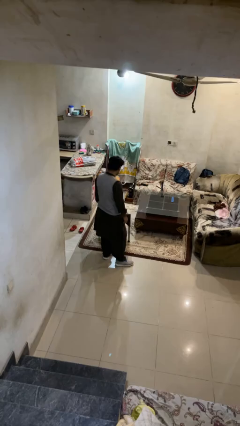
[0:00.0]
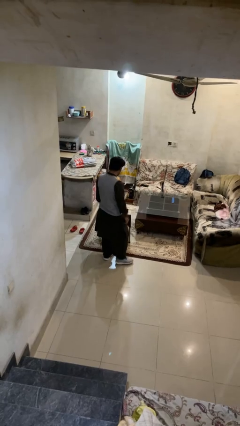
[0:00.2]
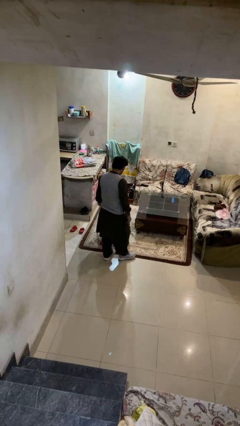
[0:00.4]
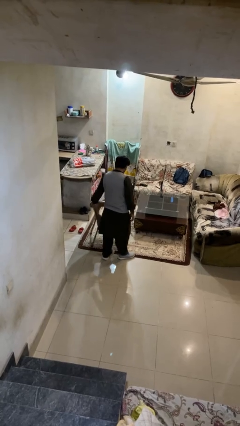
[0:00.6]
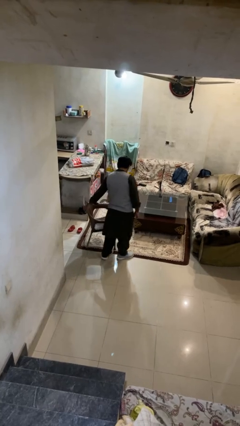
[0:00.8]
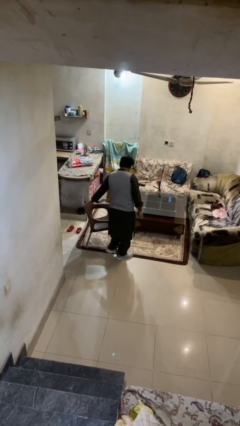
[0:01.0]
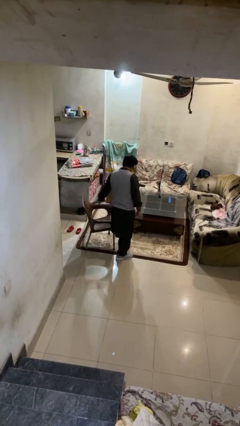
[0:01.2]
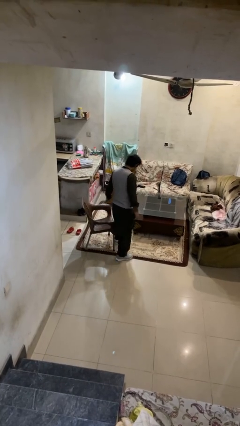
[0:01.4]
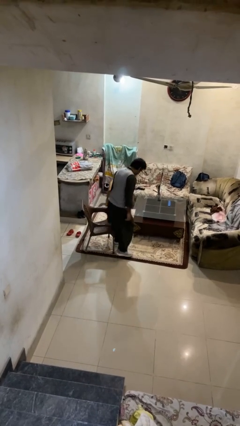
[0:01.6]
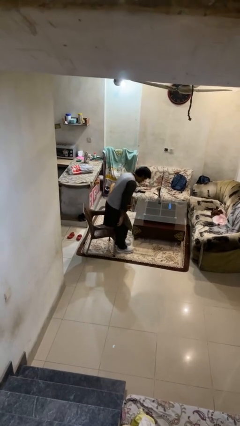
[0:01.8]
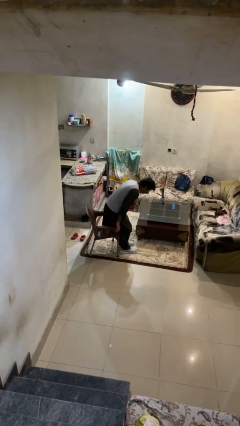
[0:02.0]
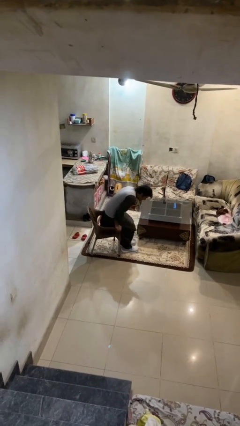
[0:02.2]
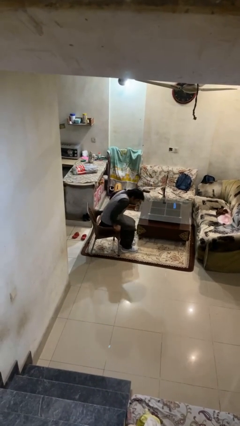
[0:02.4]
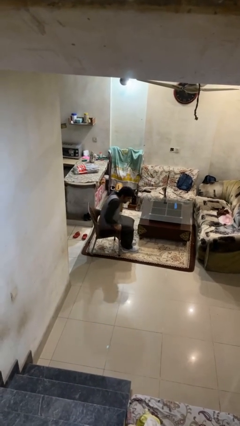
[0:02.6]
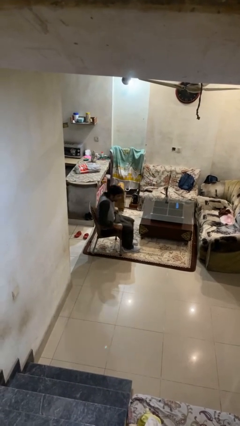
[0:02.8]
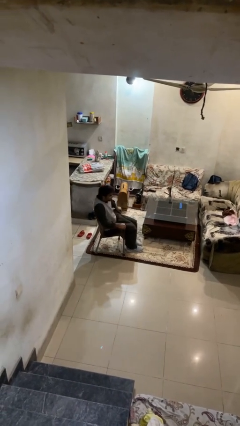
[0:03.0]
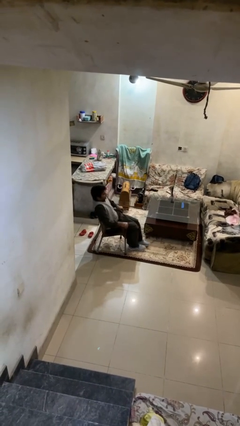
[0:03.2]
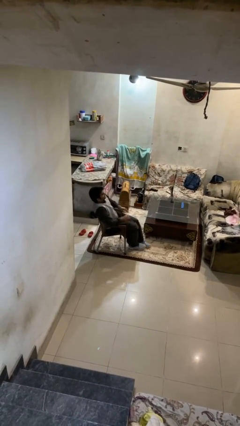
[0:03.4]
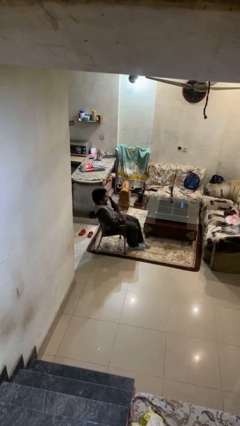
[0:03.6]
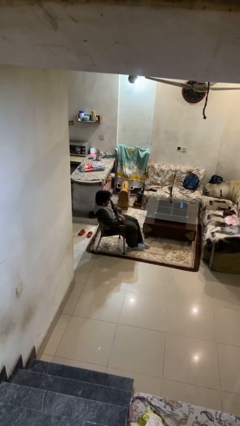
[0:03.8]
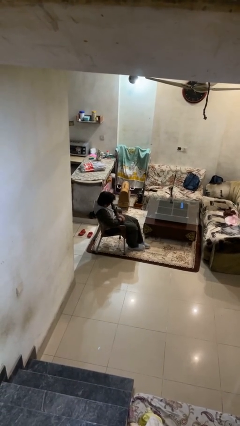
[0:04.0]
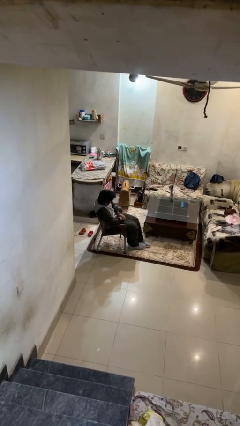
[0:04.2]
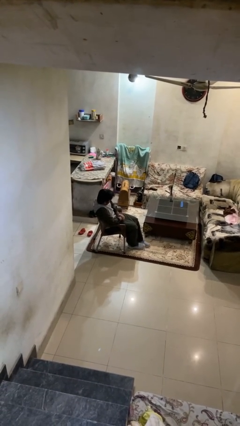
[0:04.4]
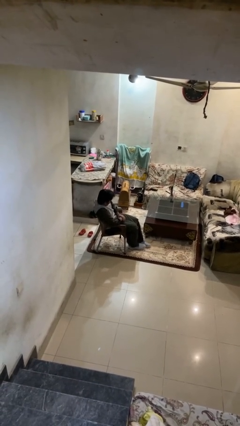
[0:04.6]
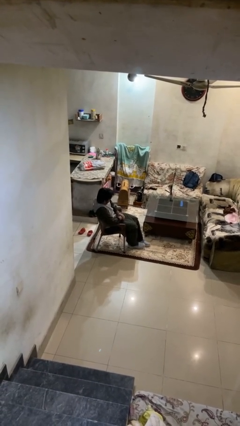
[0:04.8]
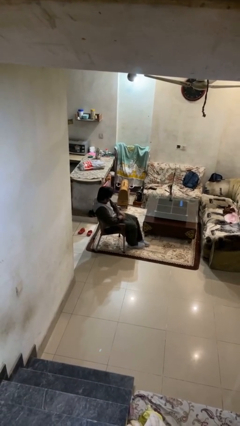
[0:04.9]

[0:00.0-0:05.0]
person sits down

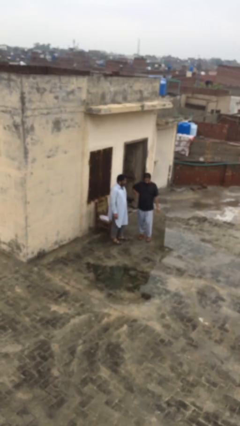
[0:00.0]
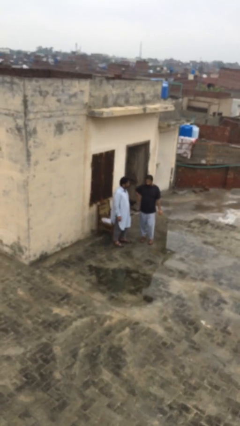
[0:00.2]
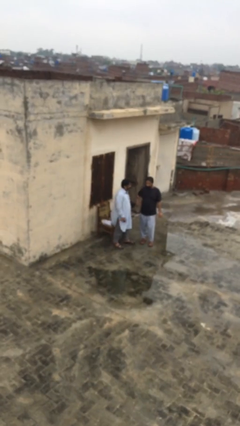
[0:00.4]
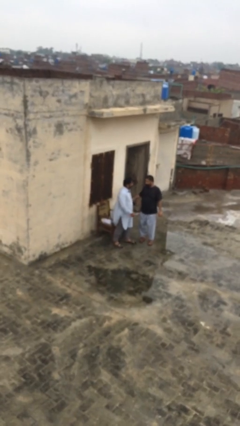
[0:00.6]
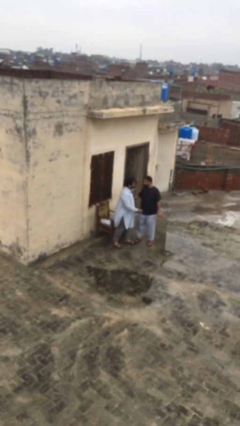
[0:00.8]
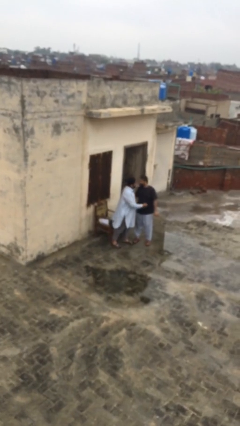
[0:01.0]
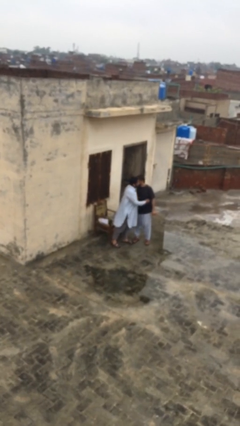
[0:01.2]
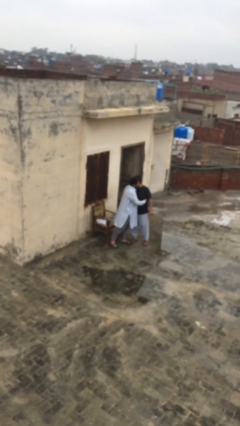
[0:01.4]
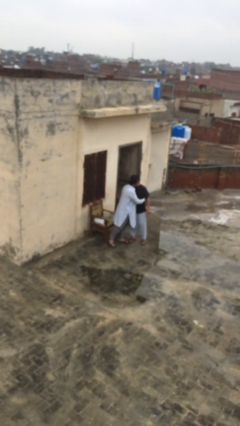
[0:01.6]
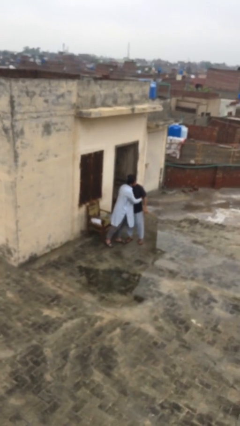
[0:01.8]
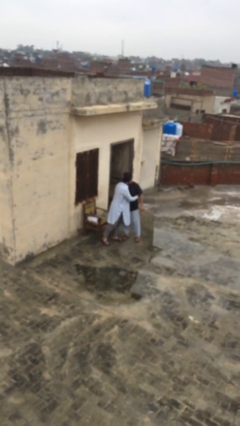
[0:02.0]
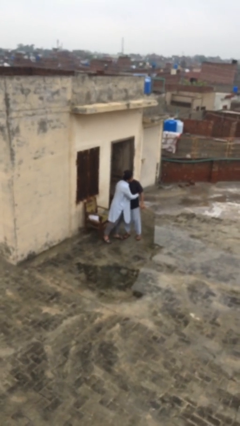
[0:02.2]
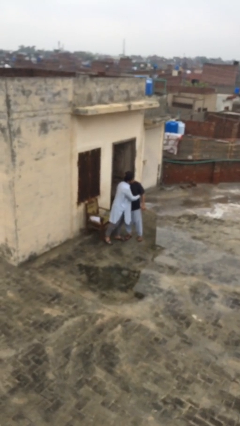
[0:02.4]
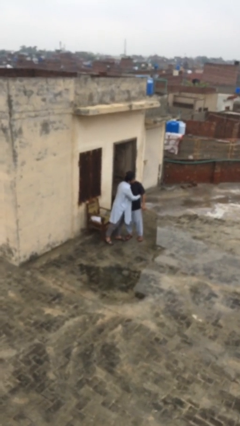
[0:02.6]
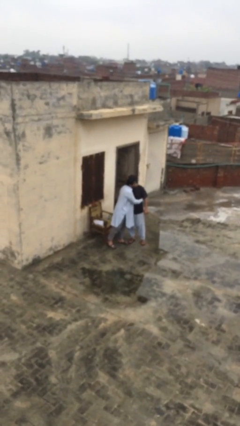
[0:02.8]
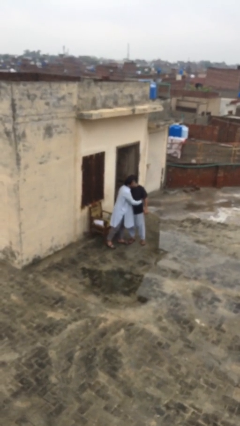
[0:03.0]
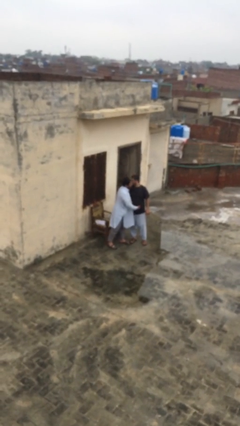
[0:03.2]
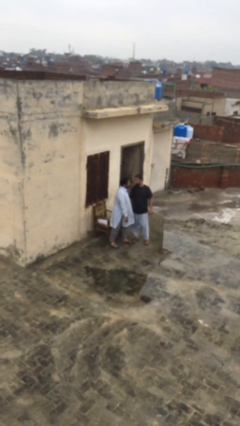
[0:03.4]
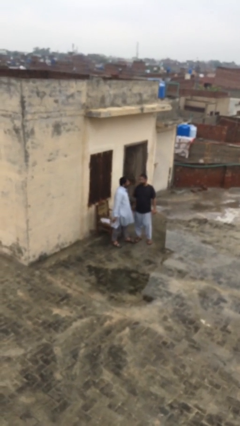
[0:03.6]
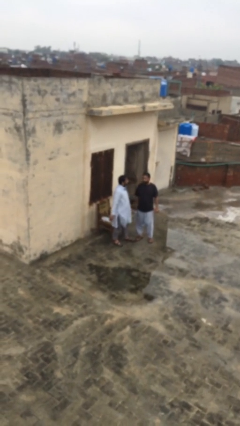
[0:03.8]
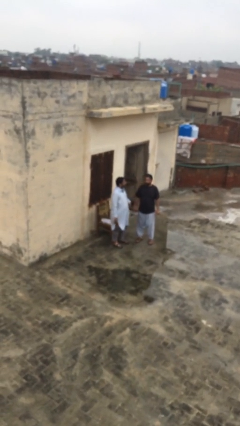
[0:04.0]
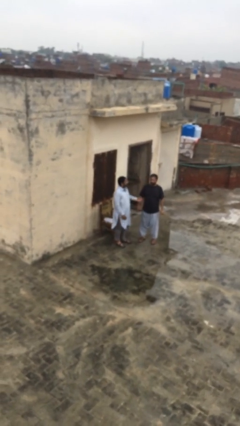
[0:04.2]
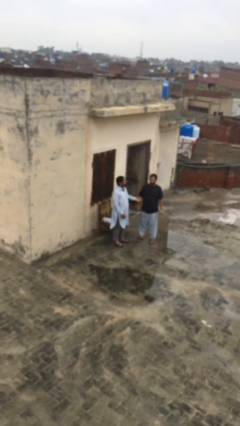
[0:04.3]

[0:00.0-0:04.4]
person embraces person

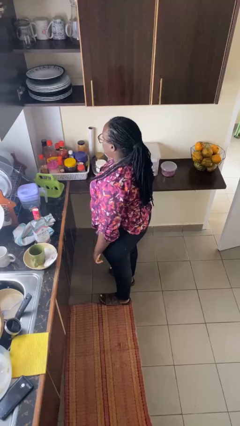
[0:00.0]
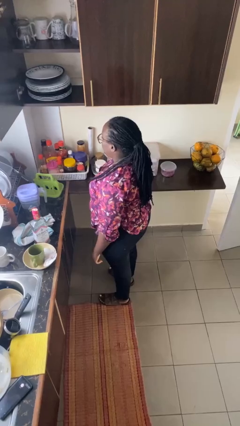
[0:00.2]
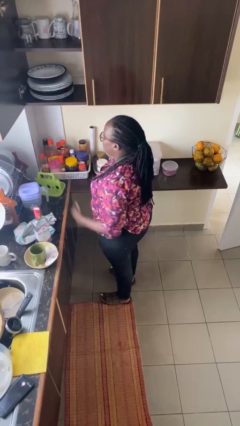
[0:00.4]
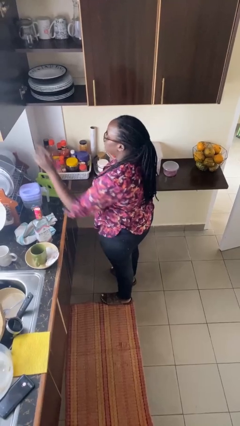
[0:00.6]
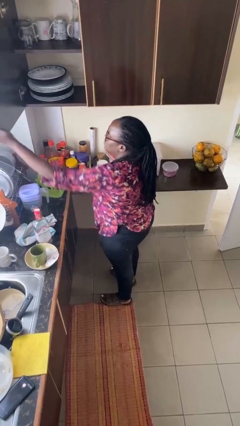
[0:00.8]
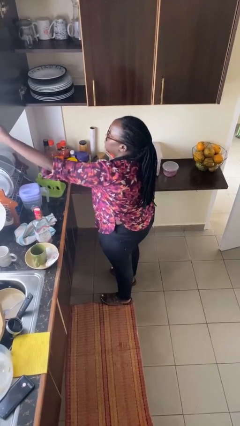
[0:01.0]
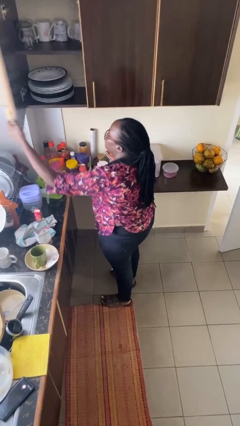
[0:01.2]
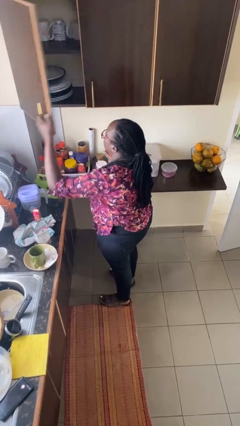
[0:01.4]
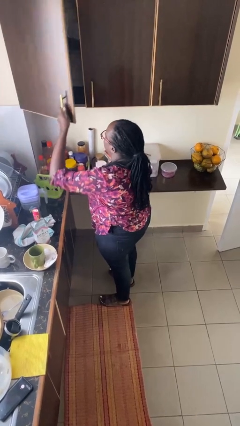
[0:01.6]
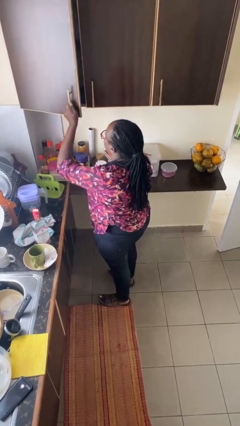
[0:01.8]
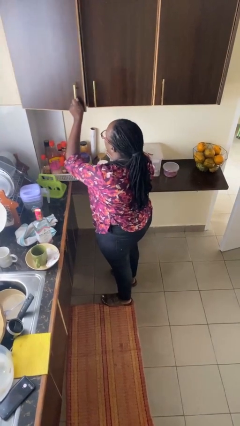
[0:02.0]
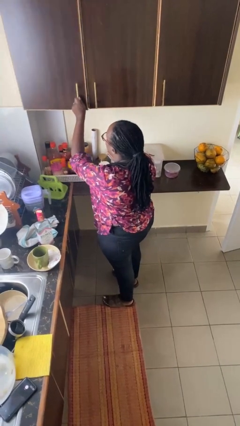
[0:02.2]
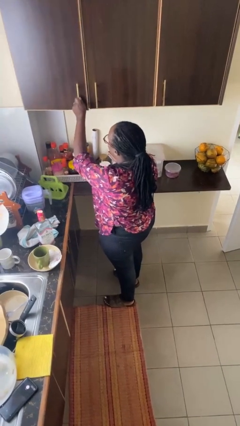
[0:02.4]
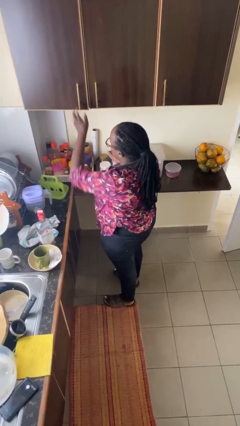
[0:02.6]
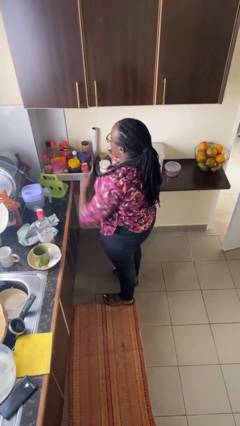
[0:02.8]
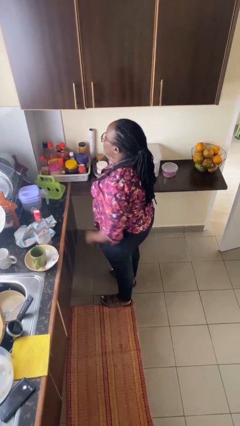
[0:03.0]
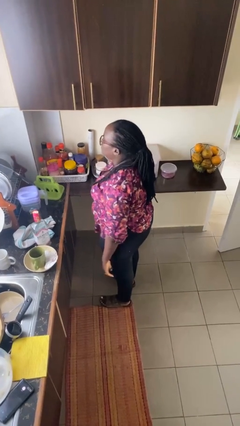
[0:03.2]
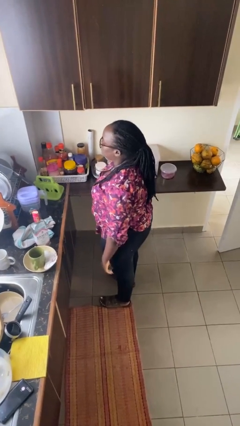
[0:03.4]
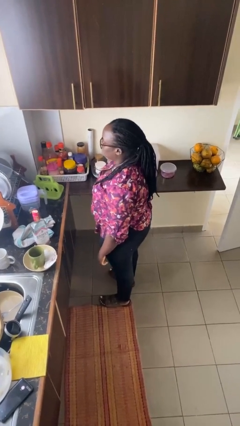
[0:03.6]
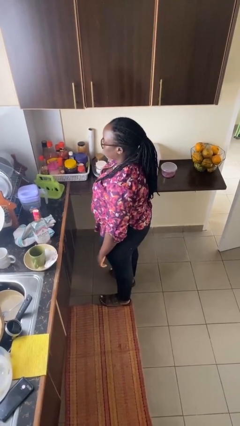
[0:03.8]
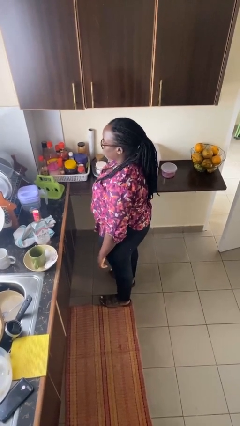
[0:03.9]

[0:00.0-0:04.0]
person closes cabinet

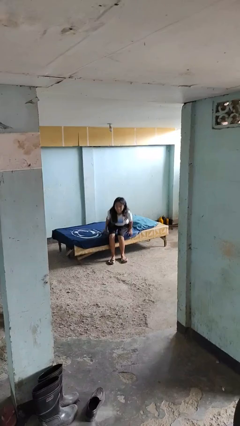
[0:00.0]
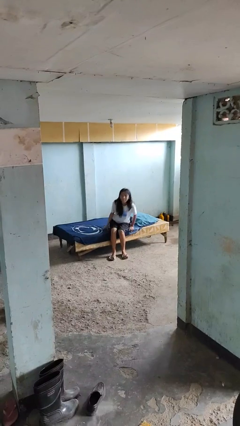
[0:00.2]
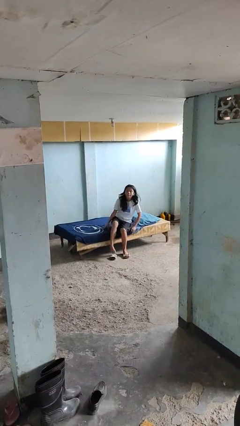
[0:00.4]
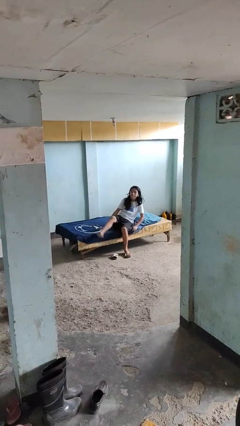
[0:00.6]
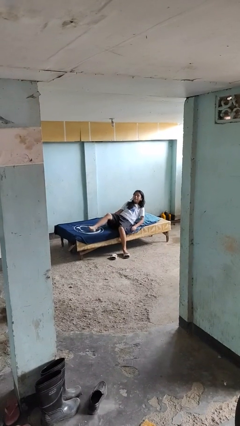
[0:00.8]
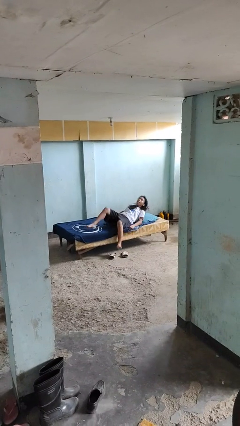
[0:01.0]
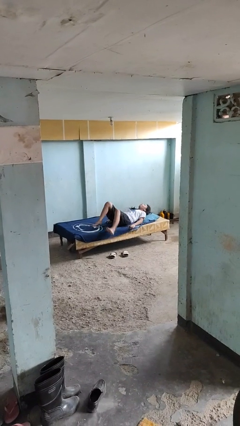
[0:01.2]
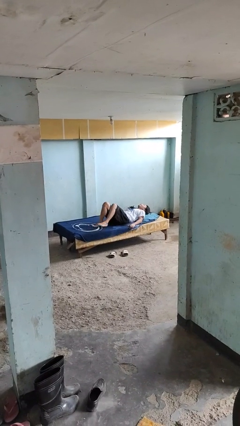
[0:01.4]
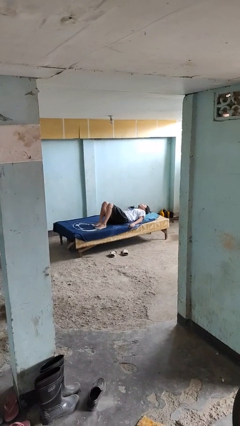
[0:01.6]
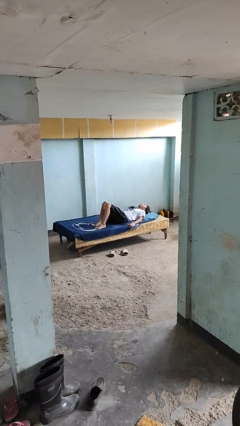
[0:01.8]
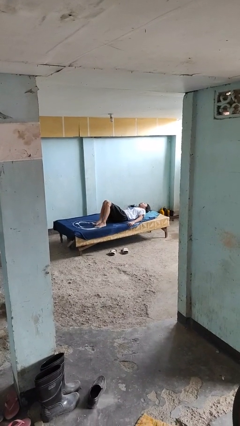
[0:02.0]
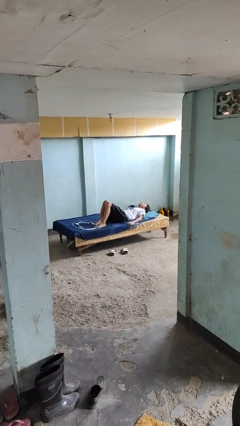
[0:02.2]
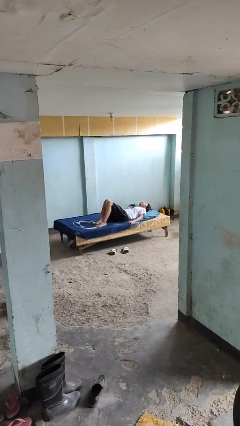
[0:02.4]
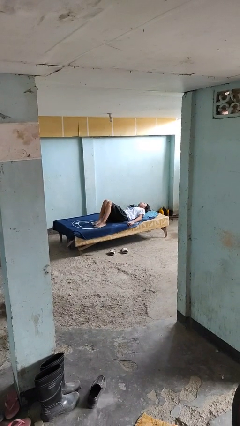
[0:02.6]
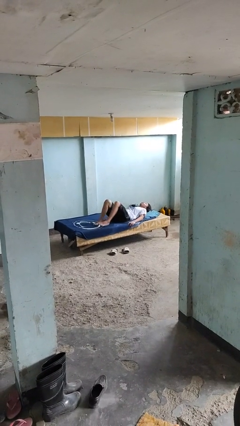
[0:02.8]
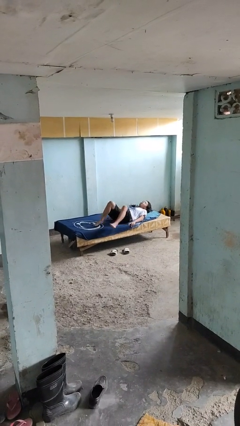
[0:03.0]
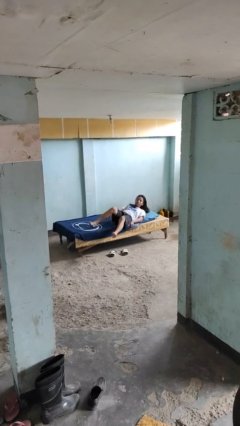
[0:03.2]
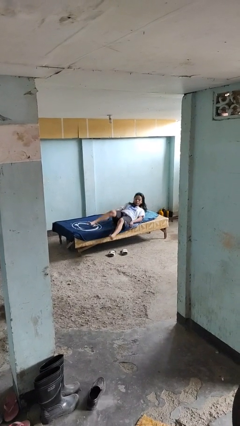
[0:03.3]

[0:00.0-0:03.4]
person lies down on bed

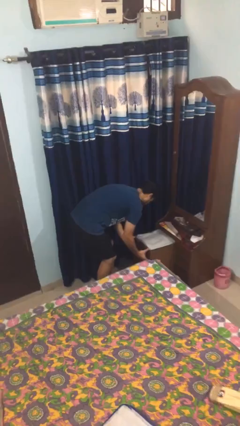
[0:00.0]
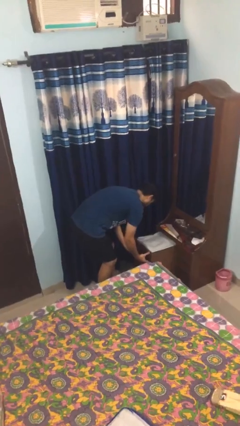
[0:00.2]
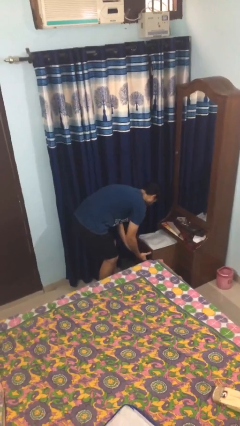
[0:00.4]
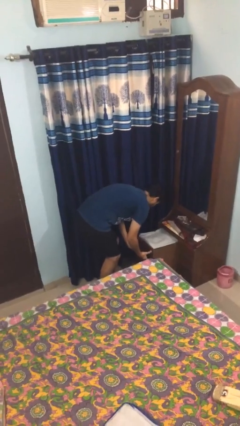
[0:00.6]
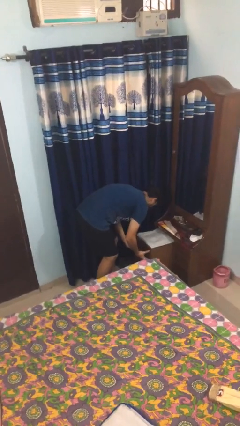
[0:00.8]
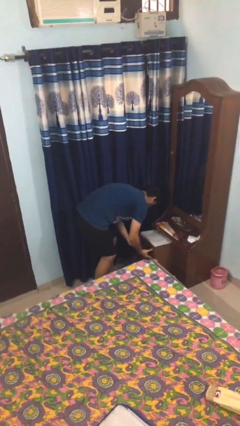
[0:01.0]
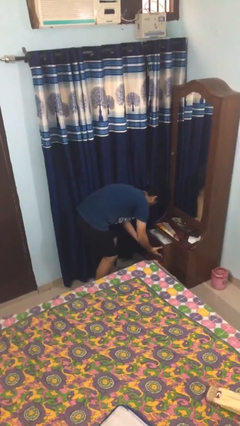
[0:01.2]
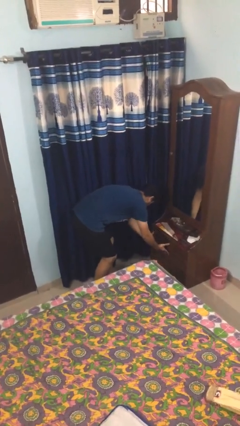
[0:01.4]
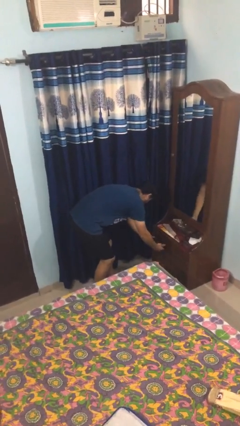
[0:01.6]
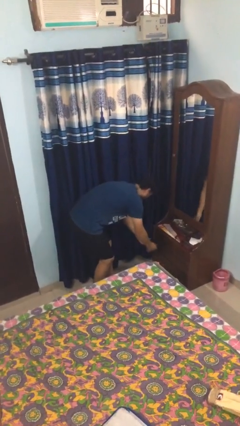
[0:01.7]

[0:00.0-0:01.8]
person closes dresser drawer
